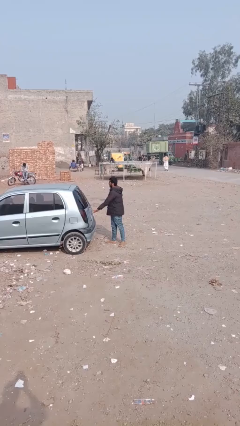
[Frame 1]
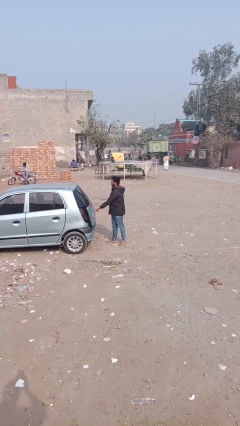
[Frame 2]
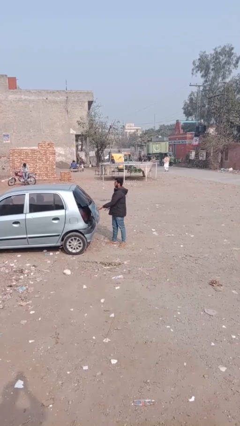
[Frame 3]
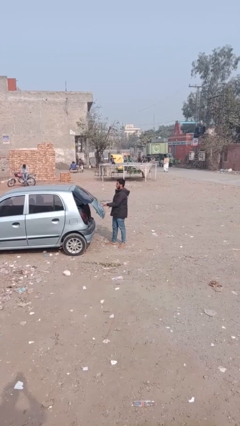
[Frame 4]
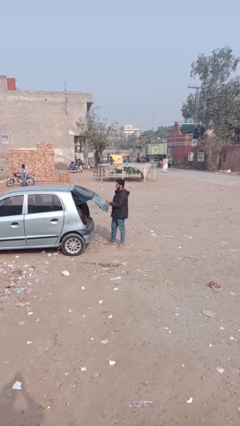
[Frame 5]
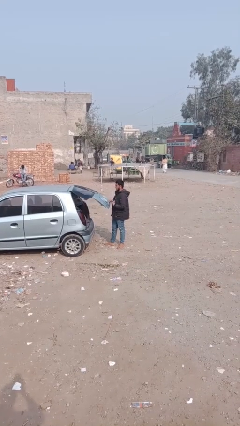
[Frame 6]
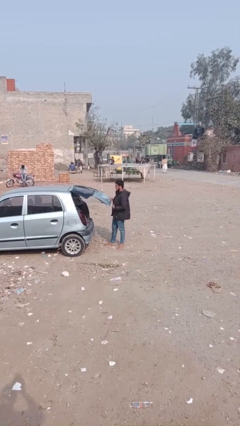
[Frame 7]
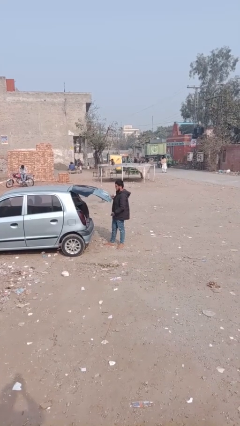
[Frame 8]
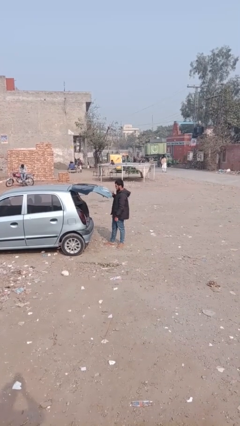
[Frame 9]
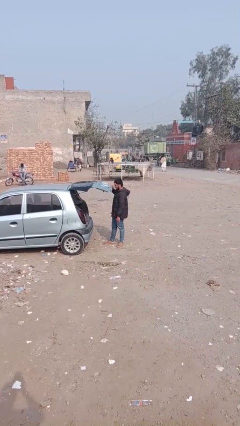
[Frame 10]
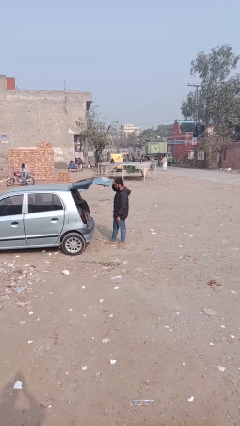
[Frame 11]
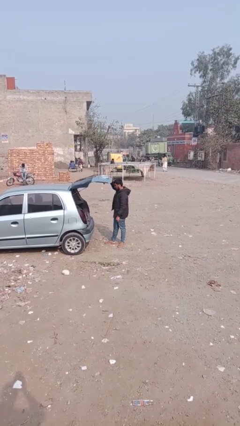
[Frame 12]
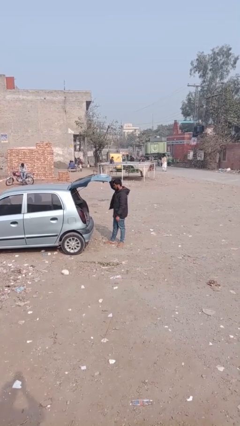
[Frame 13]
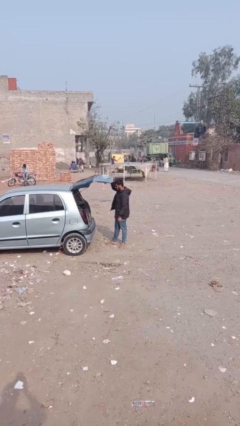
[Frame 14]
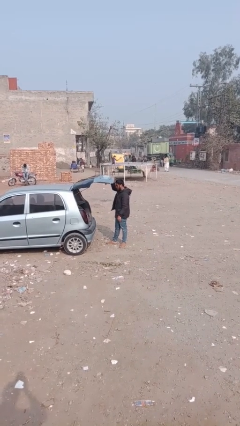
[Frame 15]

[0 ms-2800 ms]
person opens car trunk

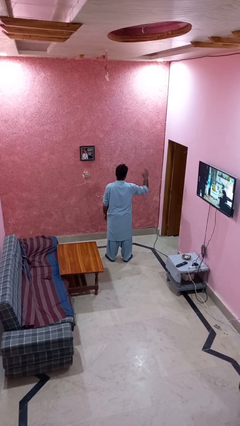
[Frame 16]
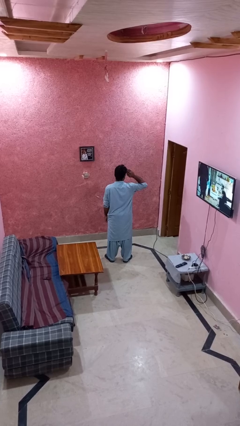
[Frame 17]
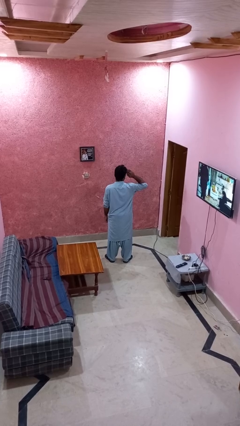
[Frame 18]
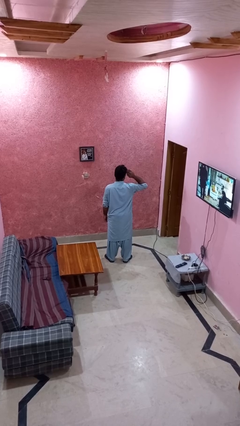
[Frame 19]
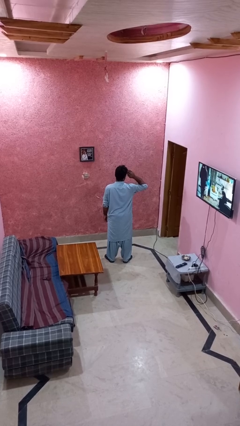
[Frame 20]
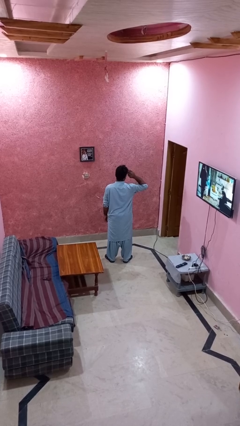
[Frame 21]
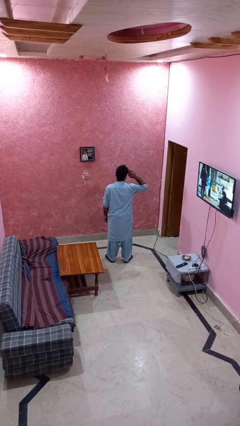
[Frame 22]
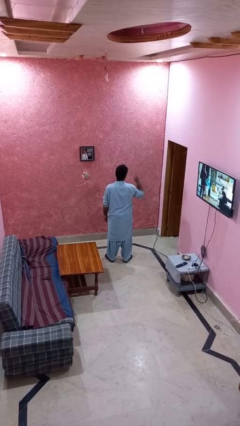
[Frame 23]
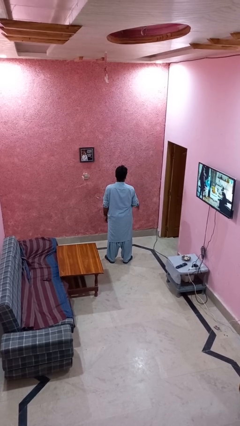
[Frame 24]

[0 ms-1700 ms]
person salutes

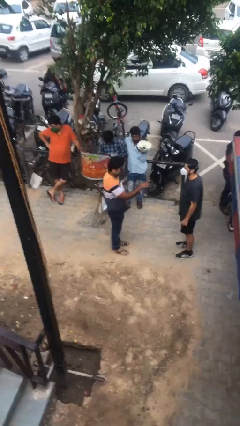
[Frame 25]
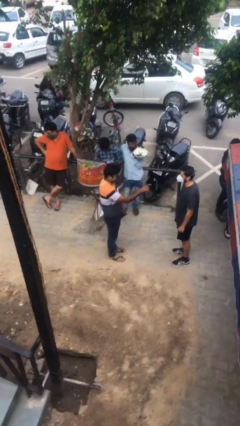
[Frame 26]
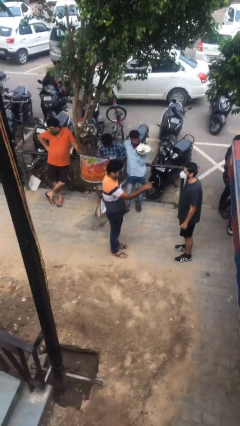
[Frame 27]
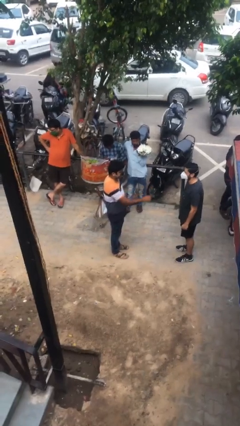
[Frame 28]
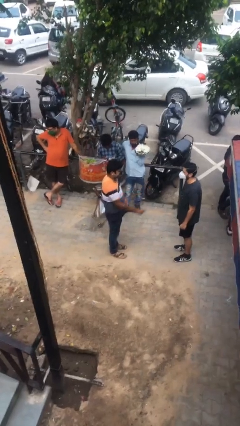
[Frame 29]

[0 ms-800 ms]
person points at person

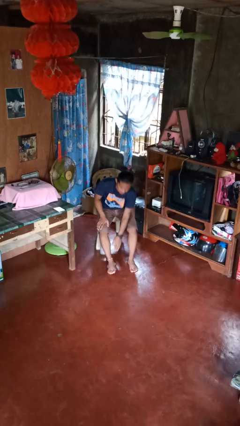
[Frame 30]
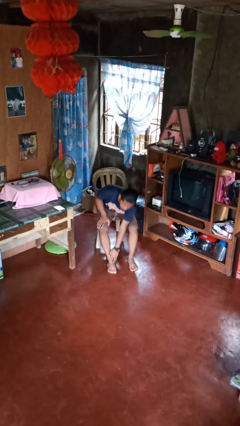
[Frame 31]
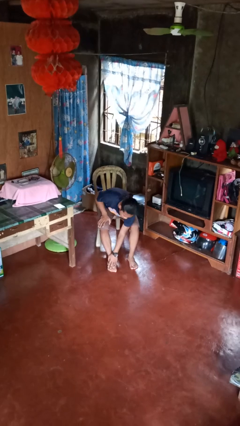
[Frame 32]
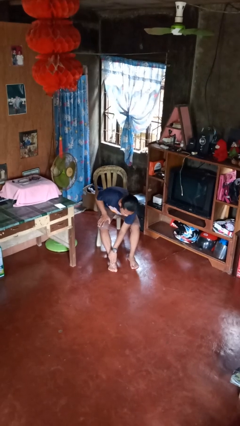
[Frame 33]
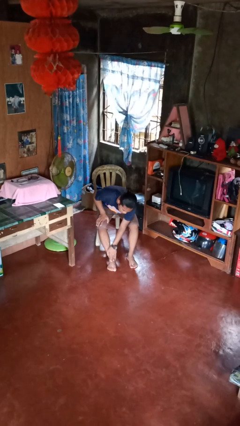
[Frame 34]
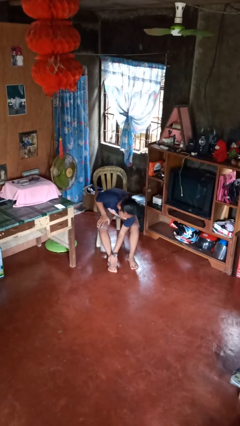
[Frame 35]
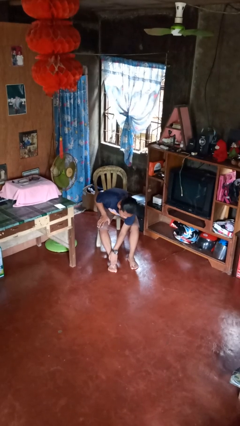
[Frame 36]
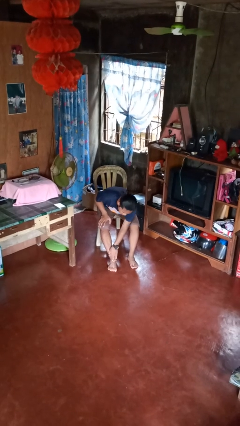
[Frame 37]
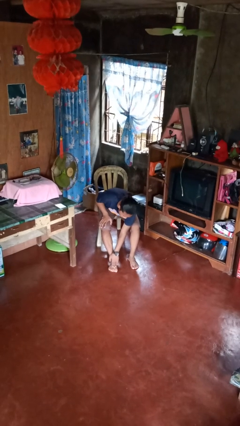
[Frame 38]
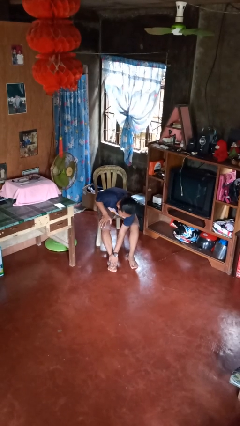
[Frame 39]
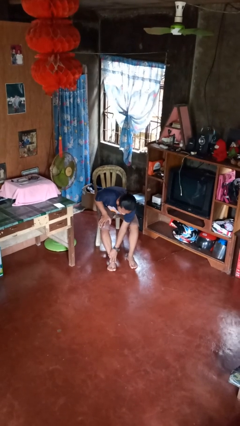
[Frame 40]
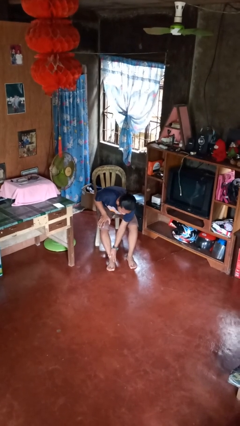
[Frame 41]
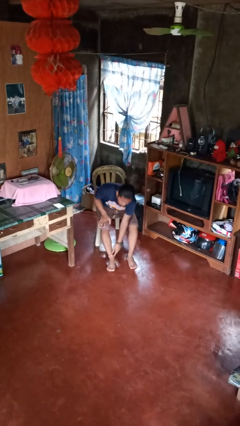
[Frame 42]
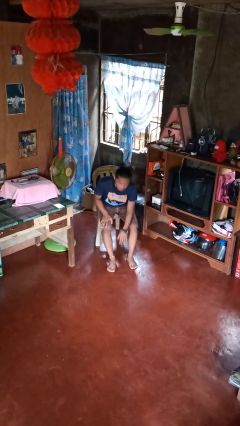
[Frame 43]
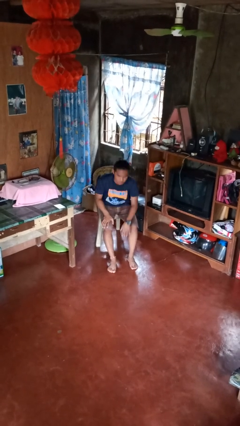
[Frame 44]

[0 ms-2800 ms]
person rubs foot

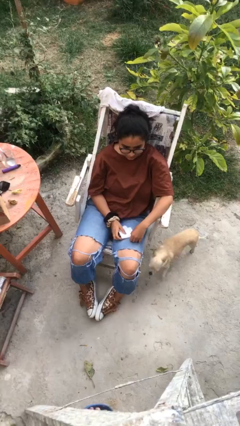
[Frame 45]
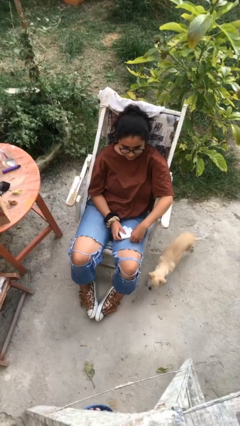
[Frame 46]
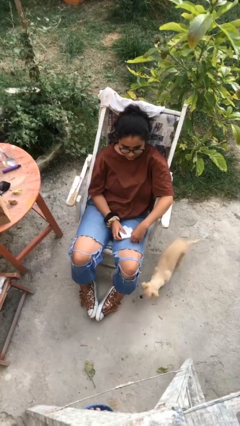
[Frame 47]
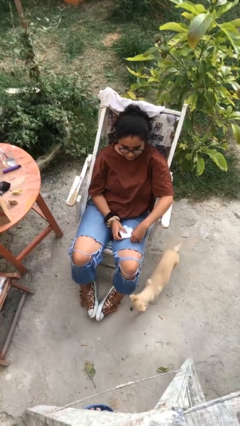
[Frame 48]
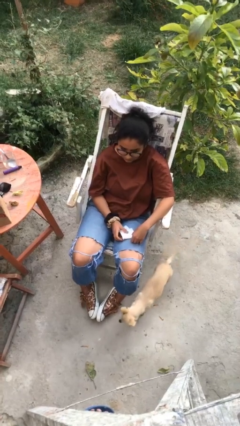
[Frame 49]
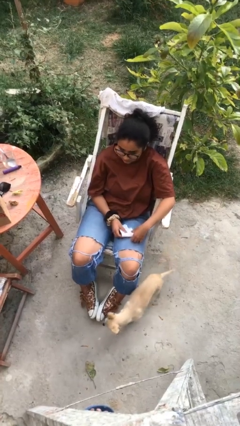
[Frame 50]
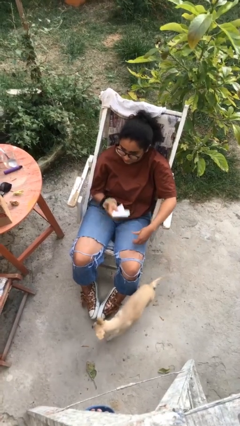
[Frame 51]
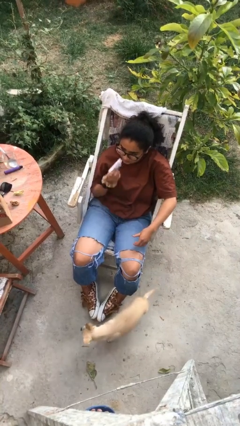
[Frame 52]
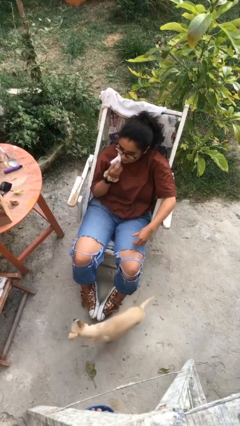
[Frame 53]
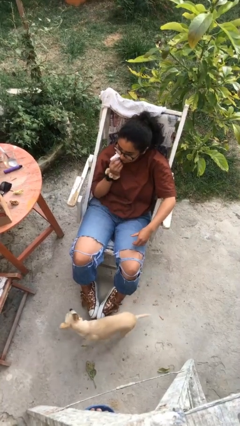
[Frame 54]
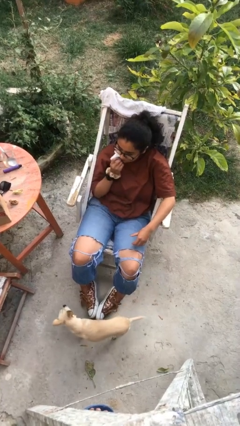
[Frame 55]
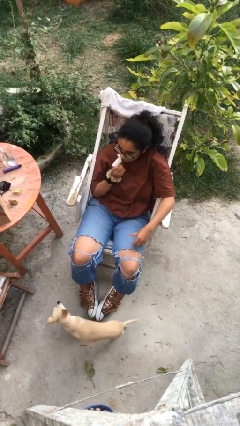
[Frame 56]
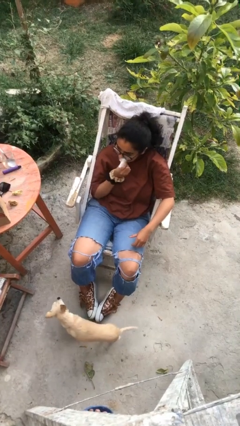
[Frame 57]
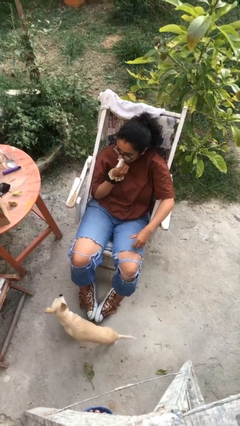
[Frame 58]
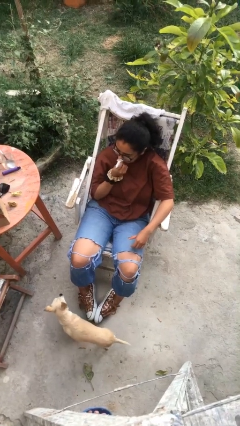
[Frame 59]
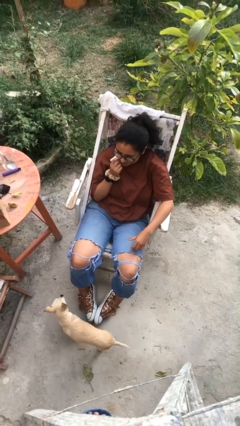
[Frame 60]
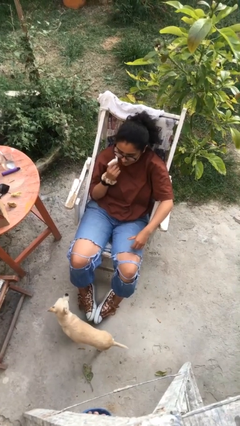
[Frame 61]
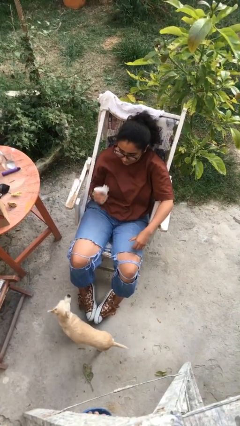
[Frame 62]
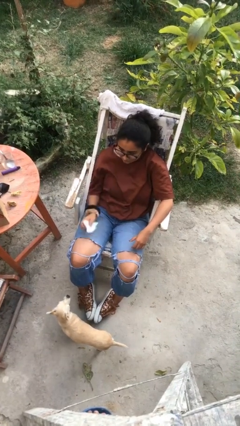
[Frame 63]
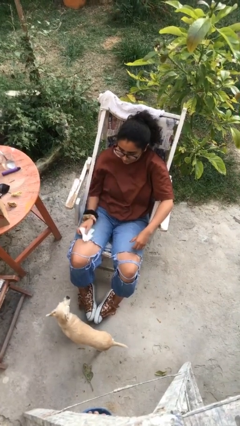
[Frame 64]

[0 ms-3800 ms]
person wipes mouth with napkin

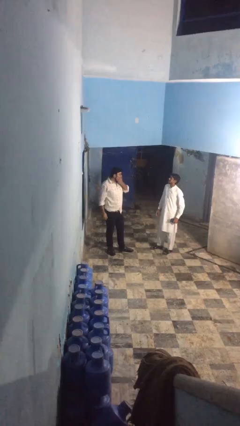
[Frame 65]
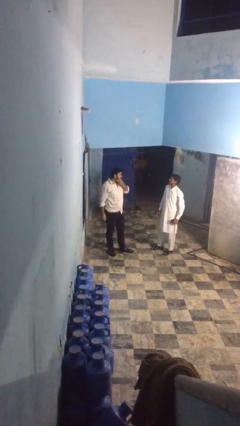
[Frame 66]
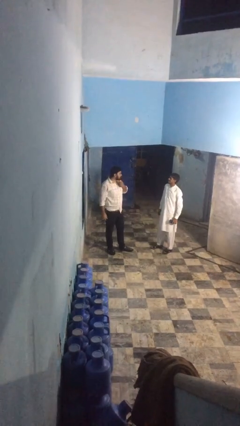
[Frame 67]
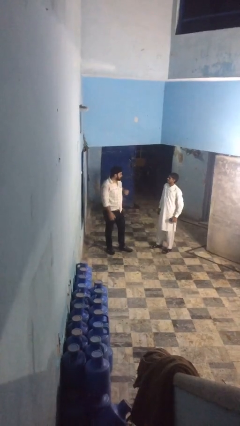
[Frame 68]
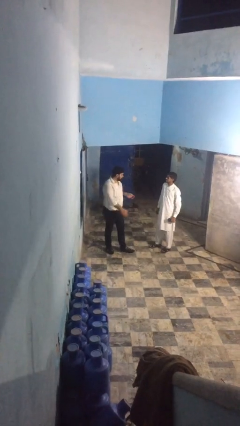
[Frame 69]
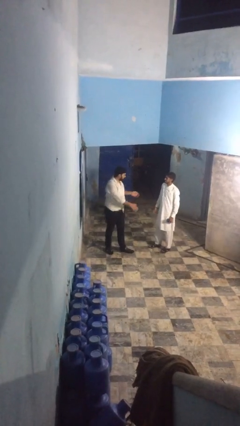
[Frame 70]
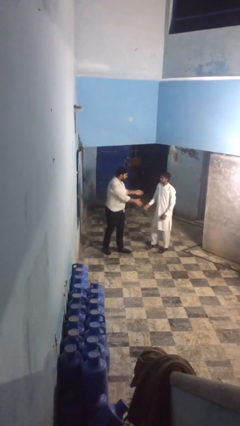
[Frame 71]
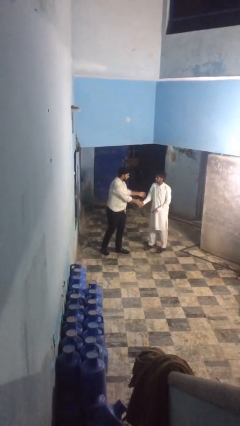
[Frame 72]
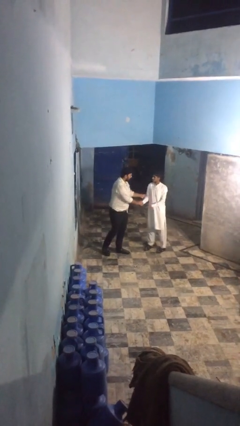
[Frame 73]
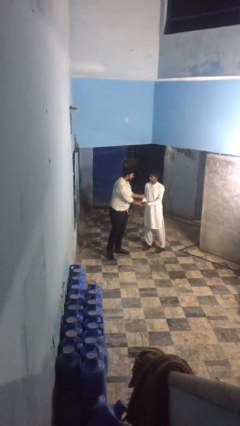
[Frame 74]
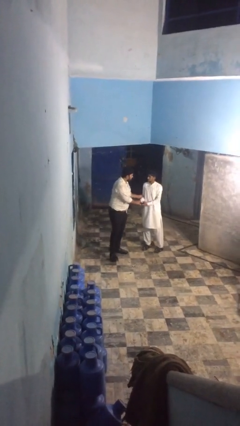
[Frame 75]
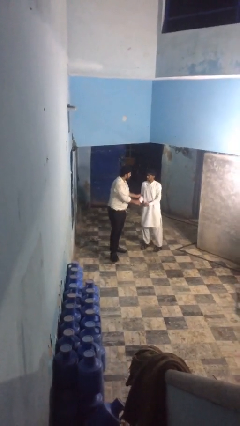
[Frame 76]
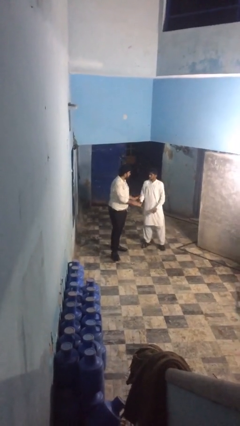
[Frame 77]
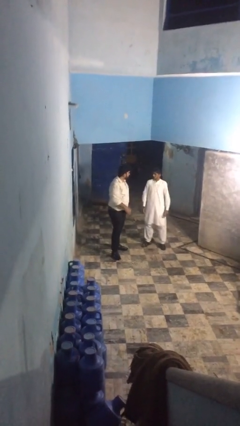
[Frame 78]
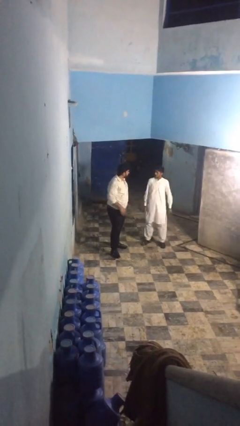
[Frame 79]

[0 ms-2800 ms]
person shakes hand

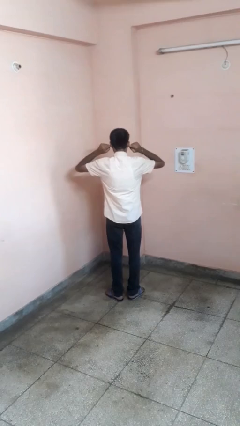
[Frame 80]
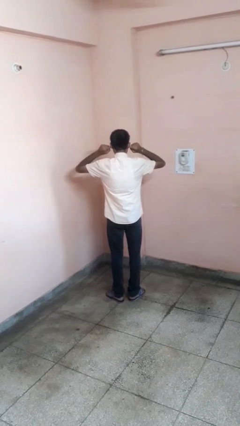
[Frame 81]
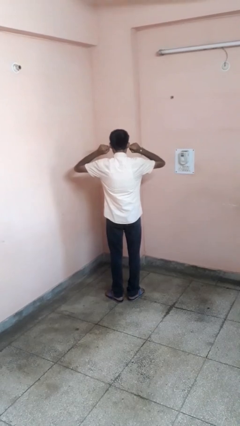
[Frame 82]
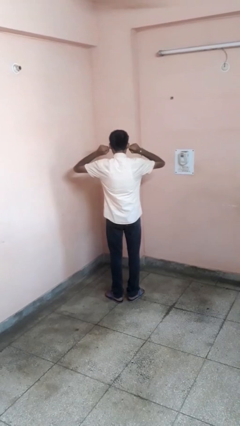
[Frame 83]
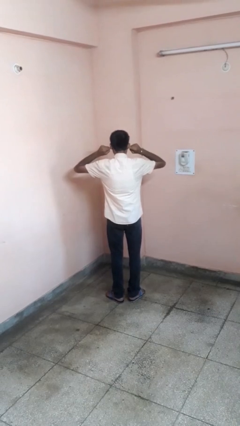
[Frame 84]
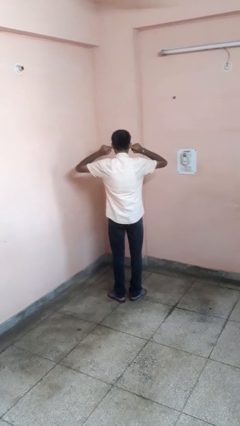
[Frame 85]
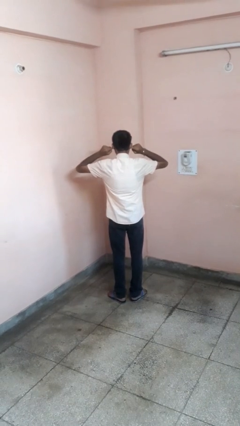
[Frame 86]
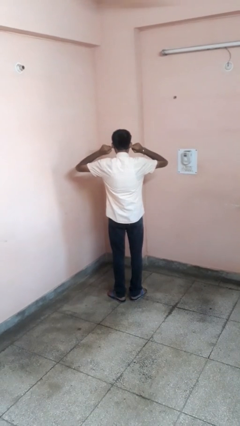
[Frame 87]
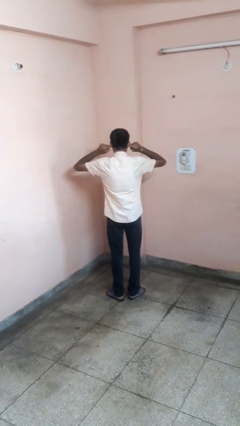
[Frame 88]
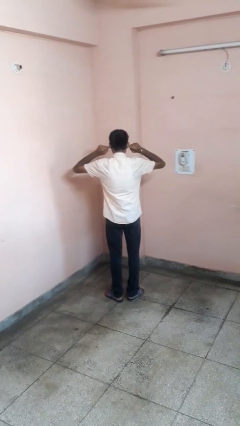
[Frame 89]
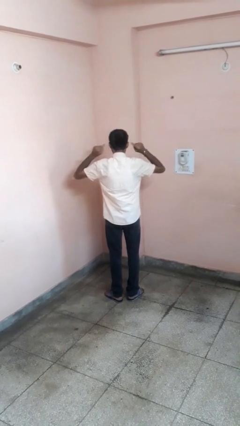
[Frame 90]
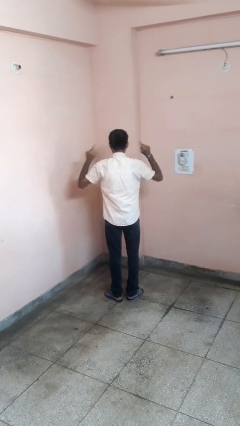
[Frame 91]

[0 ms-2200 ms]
person puts fingers in ear

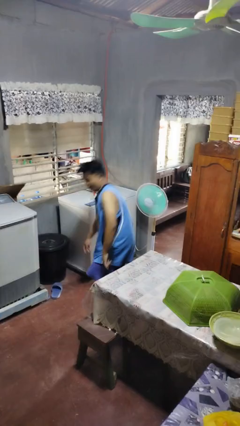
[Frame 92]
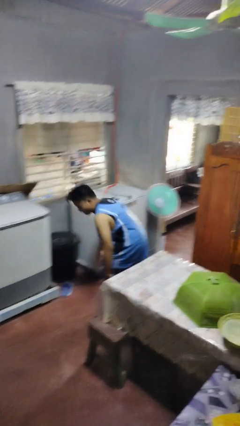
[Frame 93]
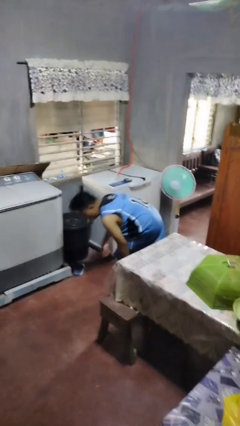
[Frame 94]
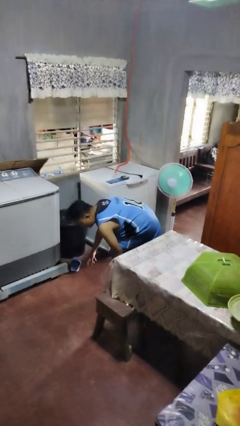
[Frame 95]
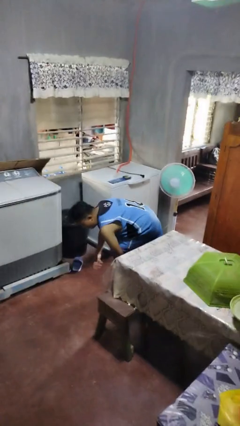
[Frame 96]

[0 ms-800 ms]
person trips on object on floor
